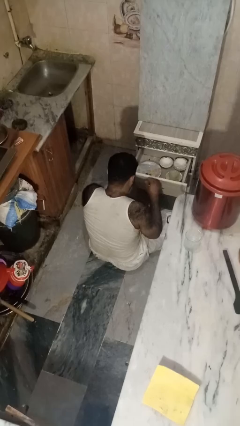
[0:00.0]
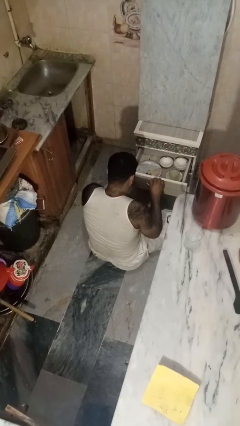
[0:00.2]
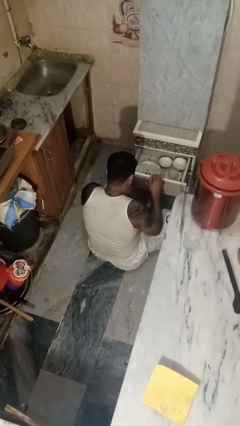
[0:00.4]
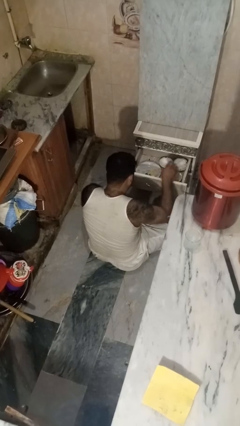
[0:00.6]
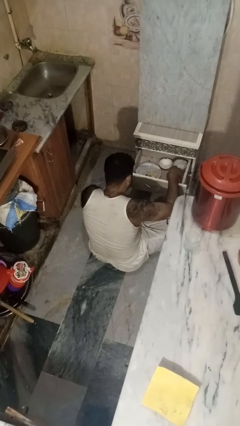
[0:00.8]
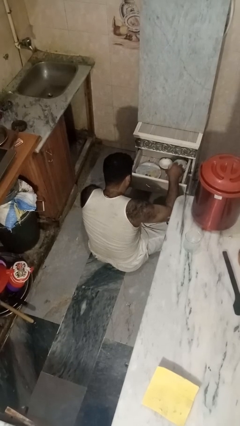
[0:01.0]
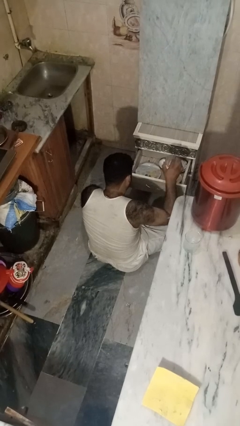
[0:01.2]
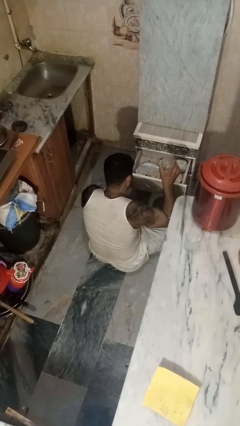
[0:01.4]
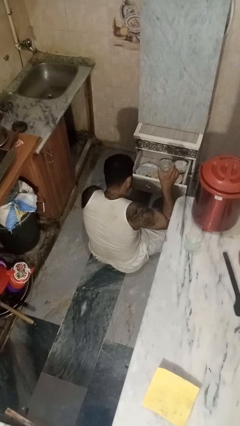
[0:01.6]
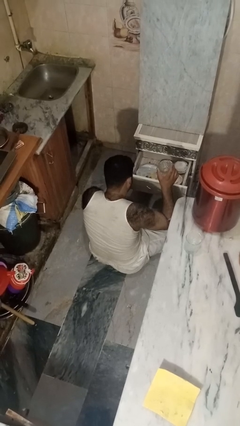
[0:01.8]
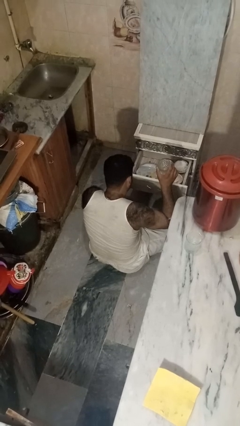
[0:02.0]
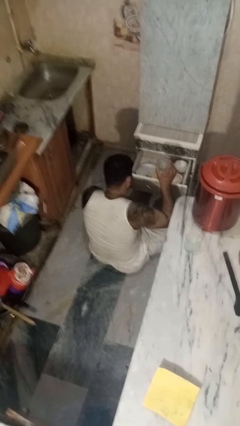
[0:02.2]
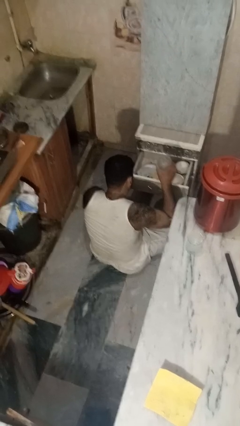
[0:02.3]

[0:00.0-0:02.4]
person takes object from kitchen drawer

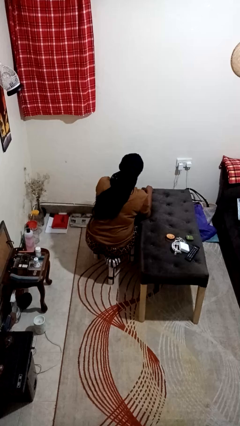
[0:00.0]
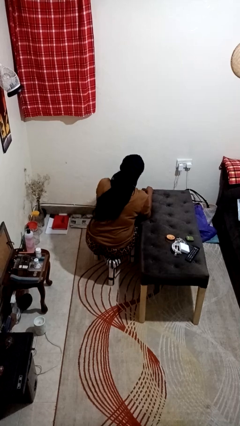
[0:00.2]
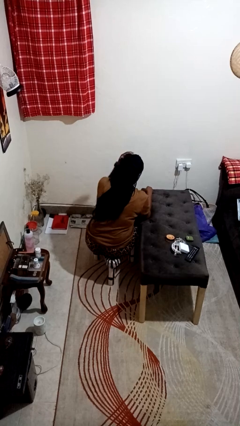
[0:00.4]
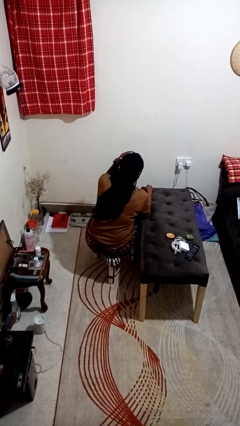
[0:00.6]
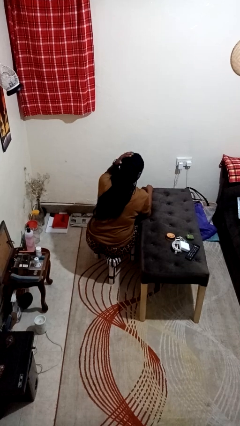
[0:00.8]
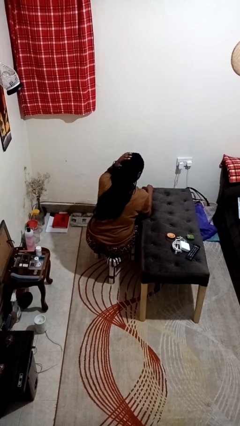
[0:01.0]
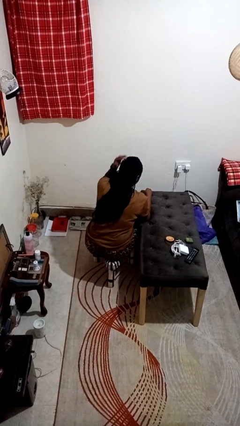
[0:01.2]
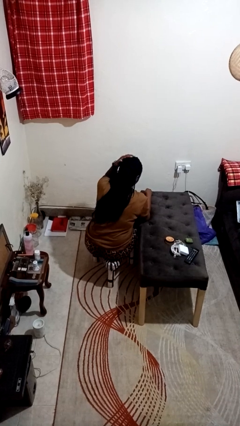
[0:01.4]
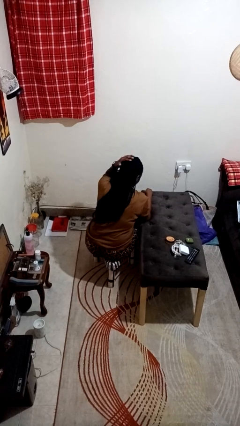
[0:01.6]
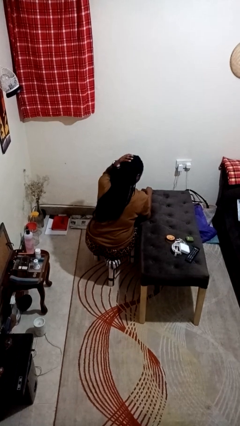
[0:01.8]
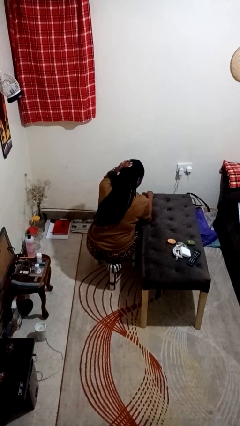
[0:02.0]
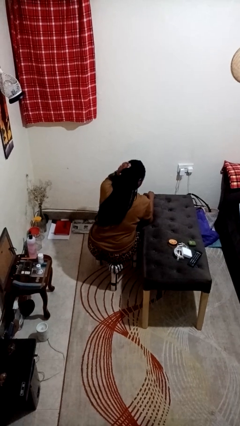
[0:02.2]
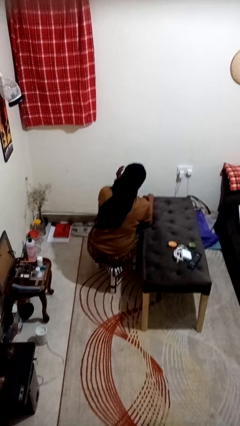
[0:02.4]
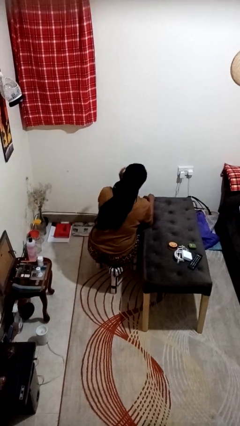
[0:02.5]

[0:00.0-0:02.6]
person strokes hair

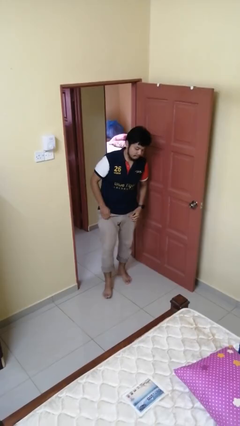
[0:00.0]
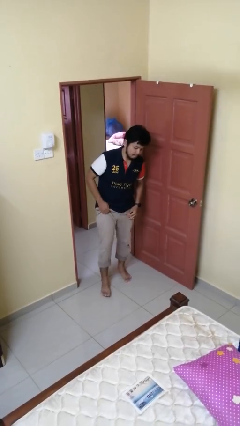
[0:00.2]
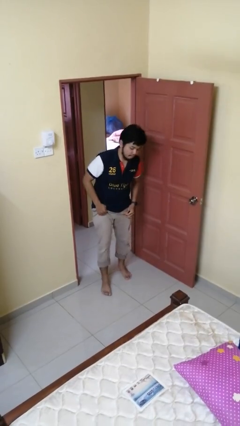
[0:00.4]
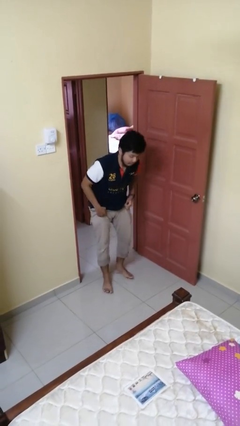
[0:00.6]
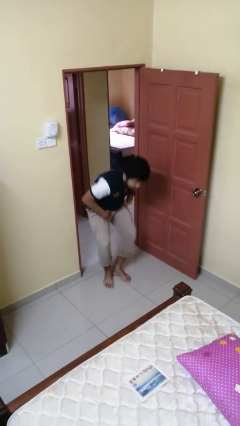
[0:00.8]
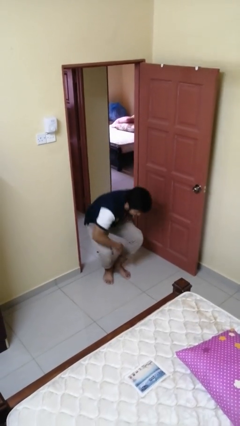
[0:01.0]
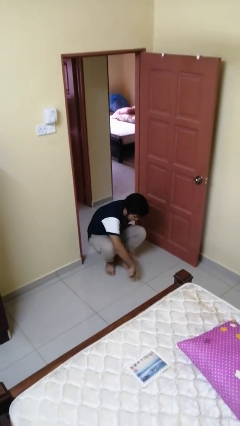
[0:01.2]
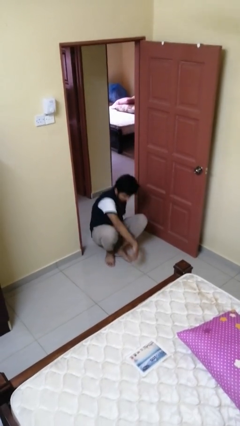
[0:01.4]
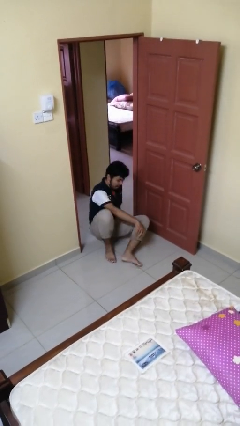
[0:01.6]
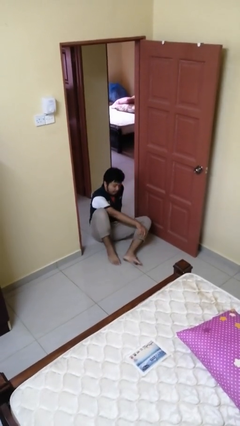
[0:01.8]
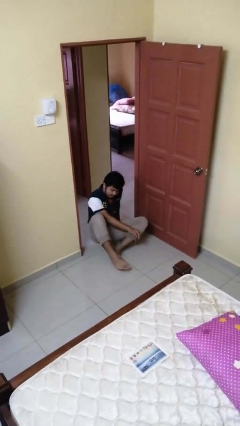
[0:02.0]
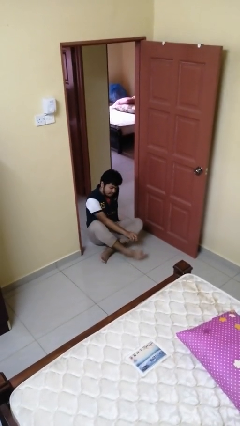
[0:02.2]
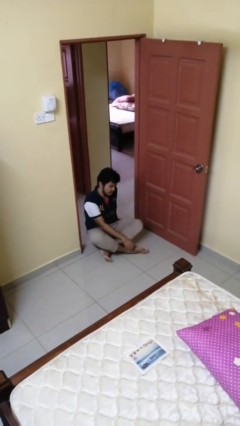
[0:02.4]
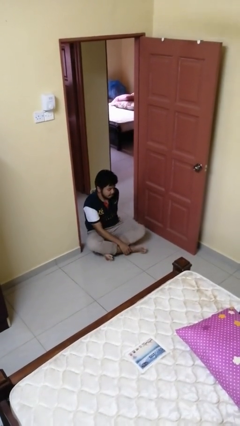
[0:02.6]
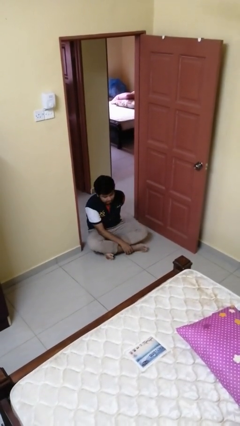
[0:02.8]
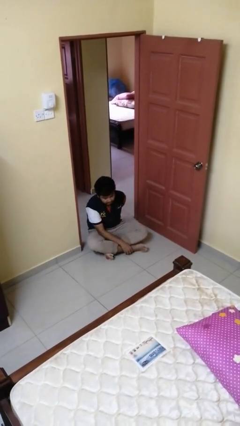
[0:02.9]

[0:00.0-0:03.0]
person sits crisscross

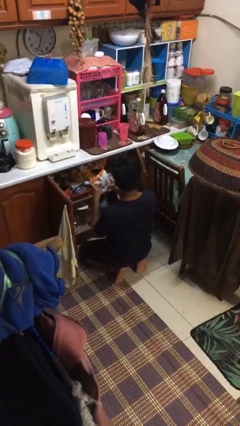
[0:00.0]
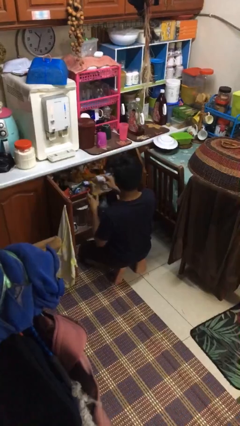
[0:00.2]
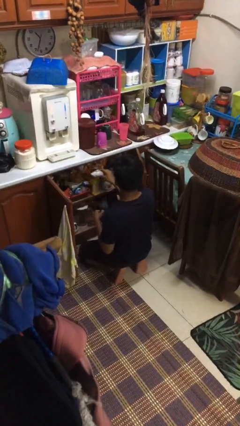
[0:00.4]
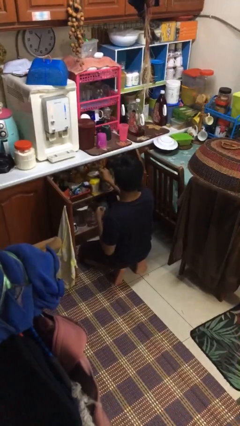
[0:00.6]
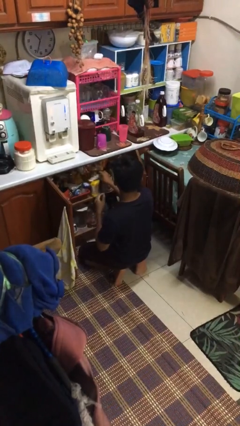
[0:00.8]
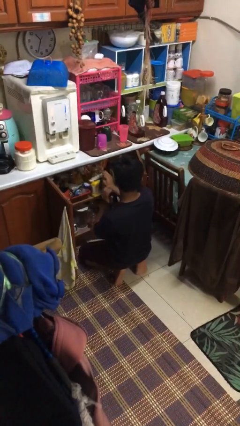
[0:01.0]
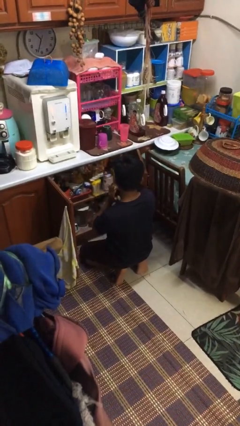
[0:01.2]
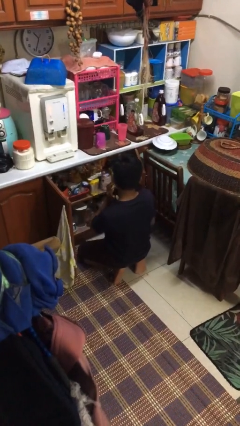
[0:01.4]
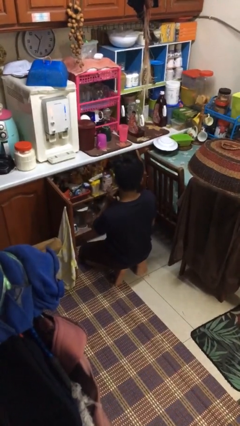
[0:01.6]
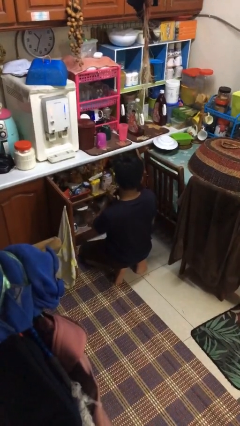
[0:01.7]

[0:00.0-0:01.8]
person puts object in cabinet

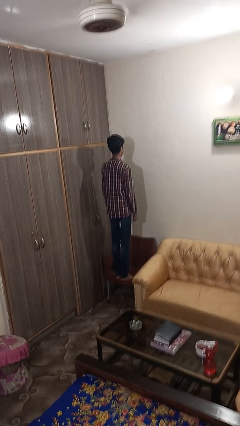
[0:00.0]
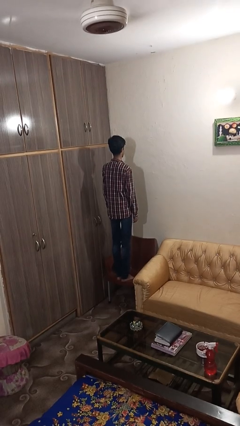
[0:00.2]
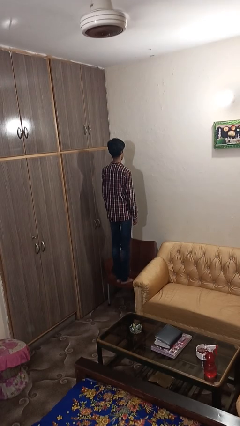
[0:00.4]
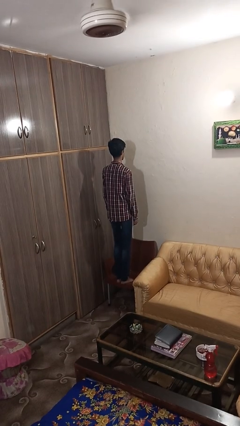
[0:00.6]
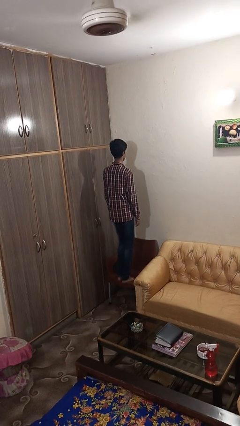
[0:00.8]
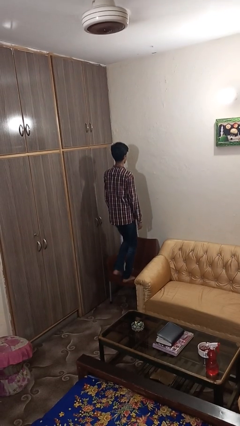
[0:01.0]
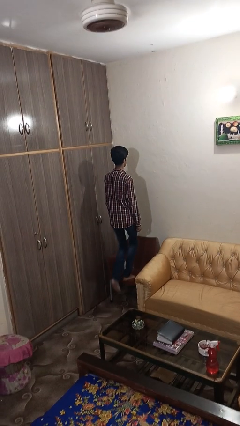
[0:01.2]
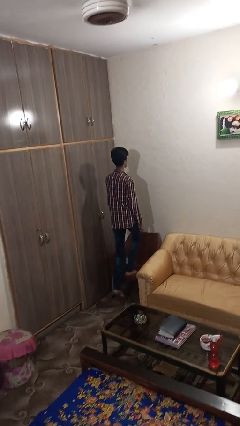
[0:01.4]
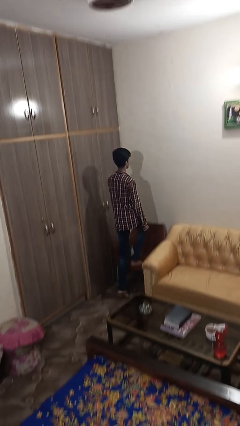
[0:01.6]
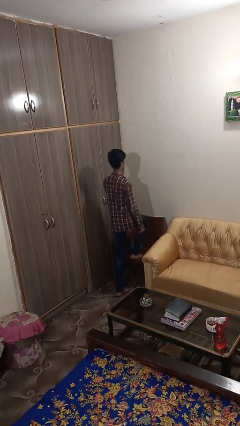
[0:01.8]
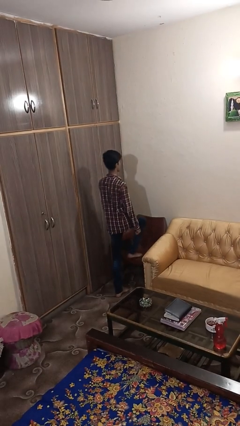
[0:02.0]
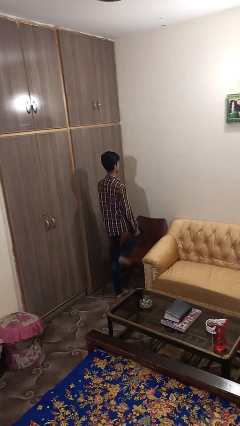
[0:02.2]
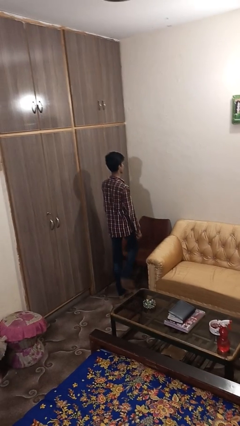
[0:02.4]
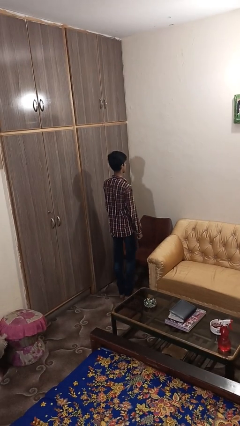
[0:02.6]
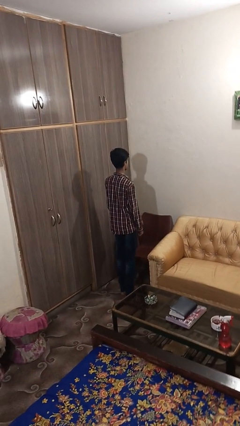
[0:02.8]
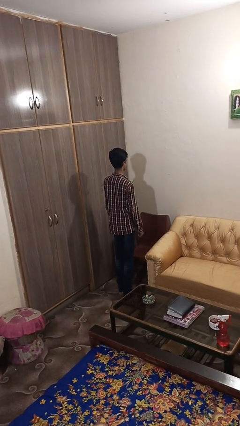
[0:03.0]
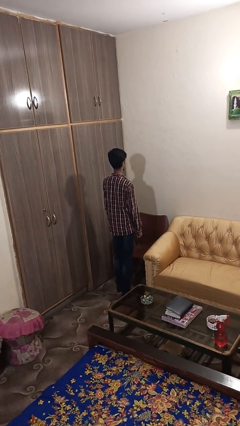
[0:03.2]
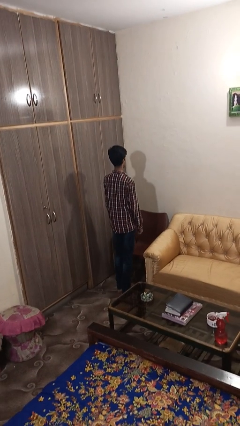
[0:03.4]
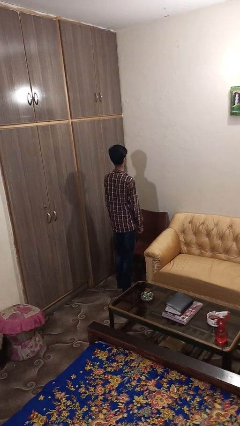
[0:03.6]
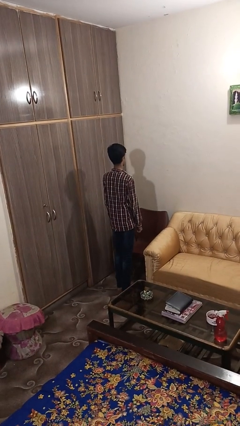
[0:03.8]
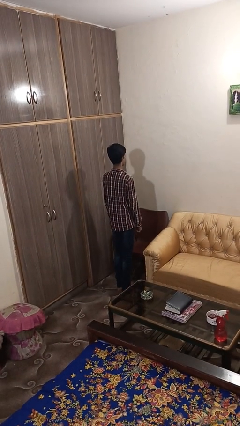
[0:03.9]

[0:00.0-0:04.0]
person climbs off chair

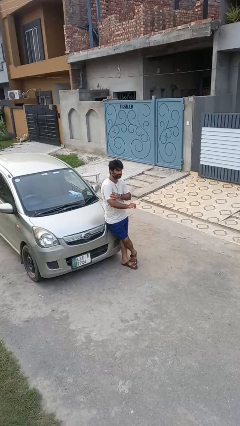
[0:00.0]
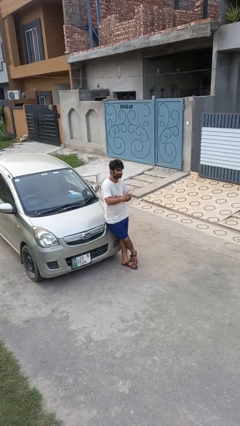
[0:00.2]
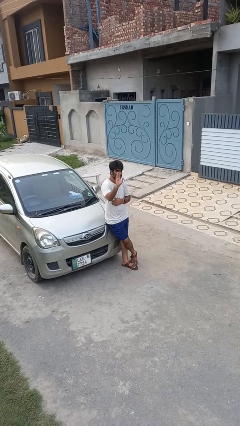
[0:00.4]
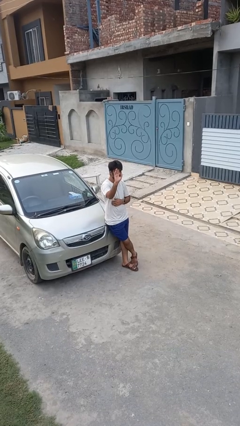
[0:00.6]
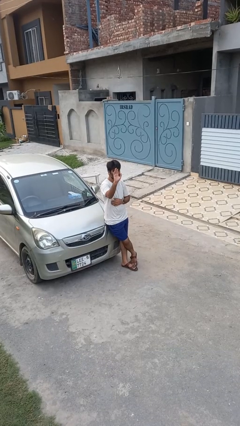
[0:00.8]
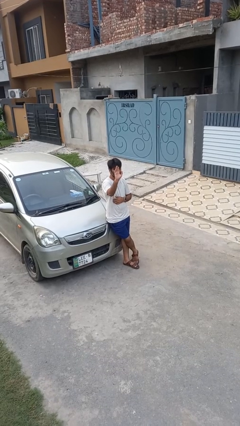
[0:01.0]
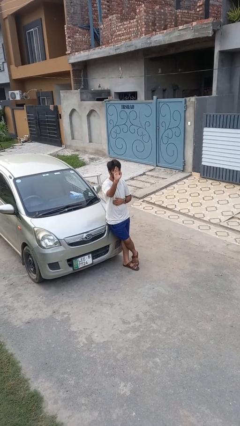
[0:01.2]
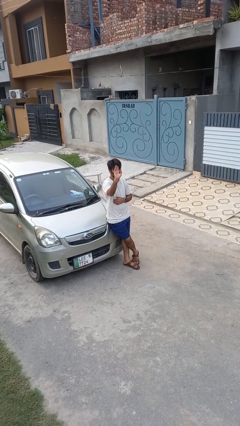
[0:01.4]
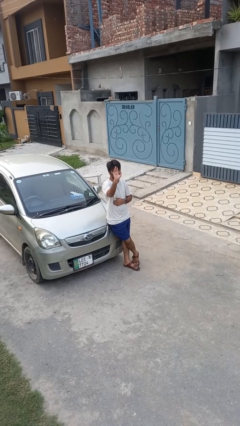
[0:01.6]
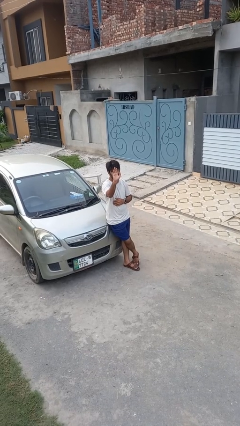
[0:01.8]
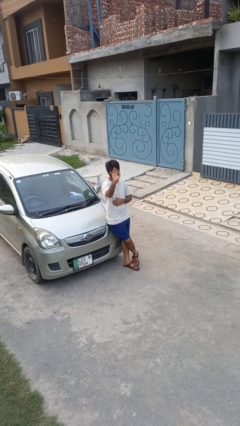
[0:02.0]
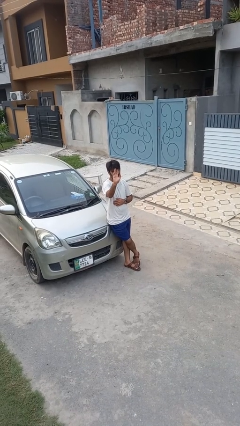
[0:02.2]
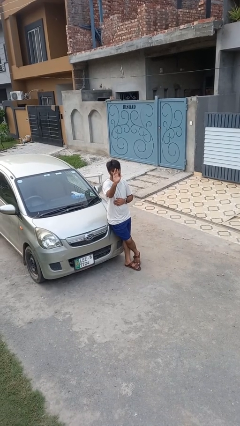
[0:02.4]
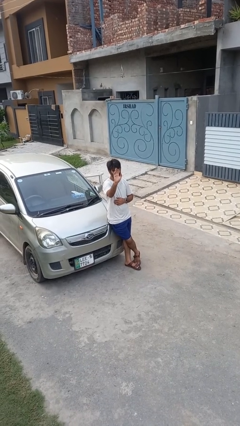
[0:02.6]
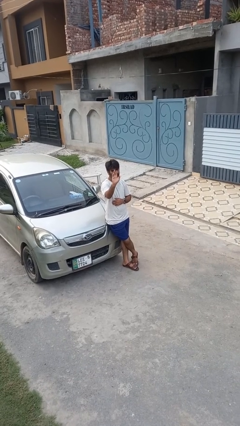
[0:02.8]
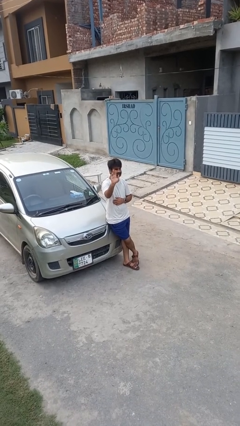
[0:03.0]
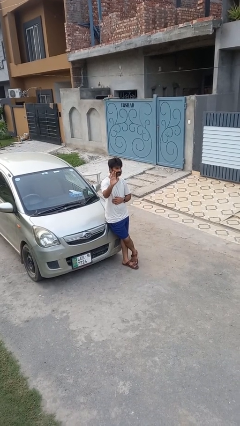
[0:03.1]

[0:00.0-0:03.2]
person gestures raise hand

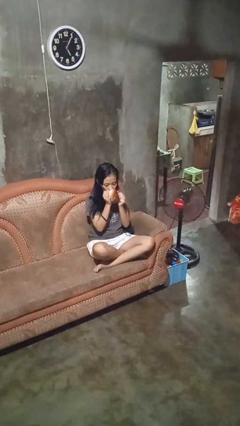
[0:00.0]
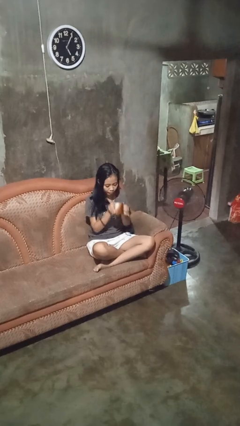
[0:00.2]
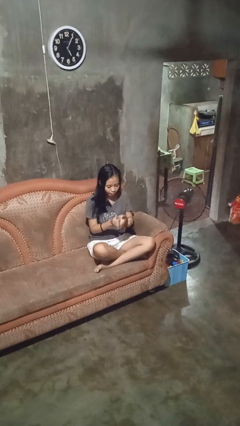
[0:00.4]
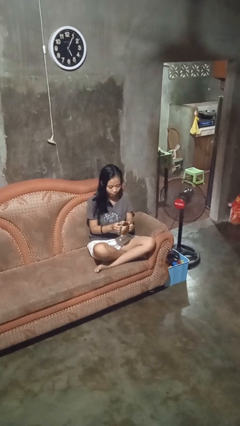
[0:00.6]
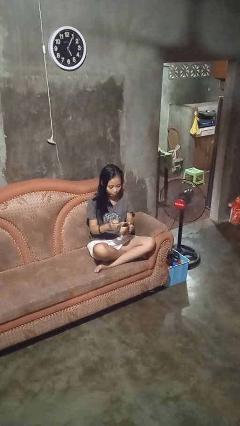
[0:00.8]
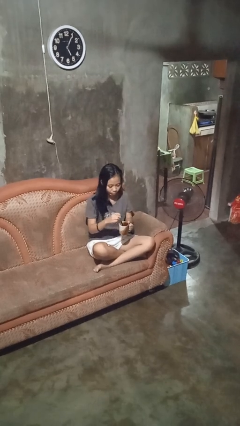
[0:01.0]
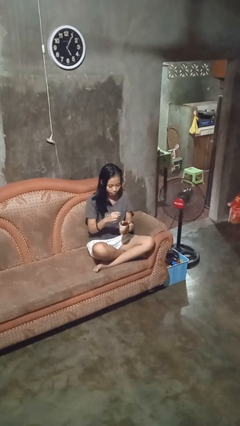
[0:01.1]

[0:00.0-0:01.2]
person stirs mug
